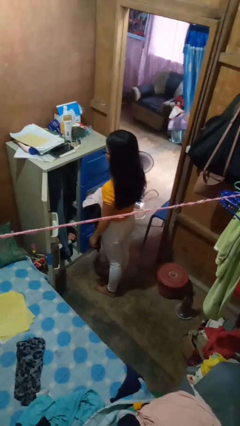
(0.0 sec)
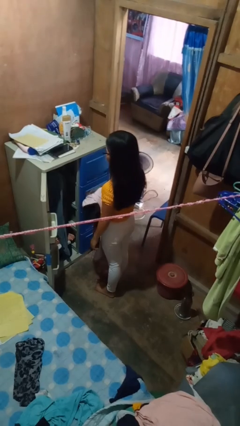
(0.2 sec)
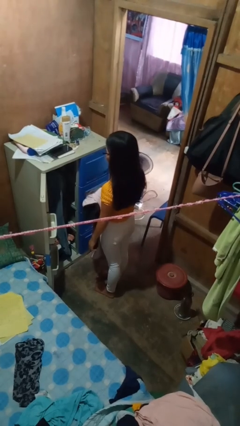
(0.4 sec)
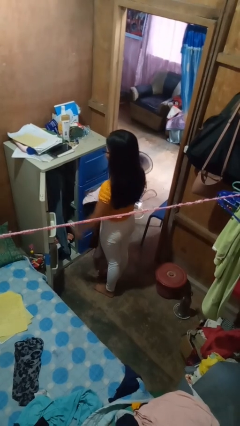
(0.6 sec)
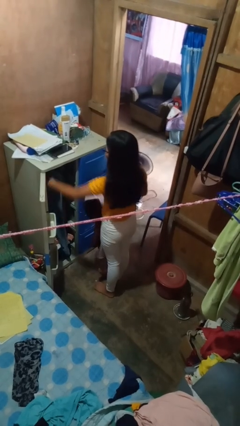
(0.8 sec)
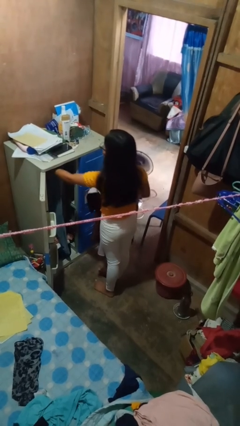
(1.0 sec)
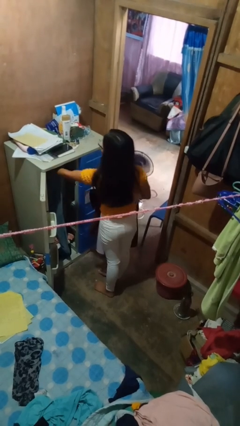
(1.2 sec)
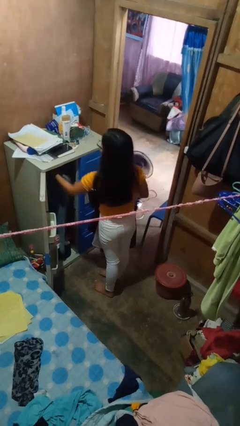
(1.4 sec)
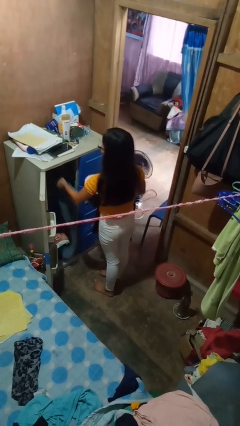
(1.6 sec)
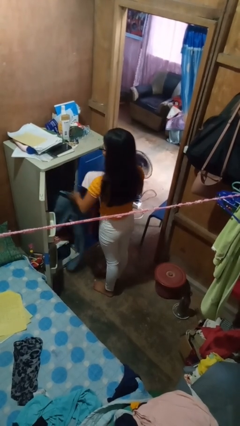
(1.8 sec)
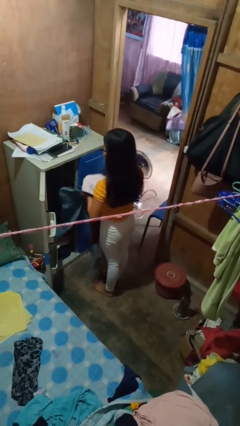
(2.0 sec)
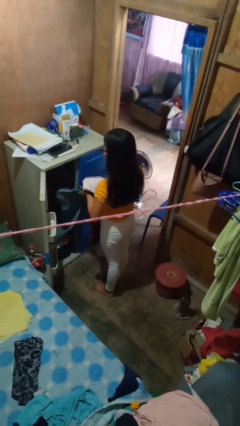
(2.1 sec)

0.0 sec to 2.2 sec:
person takes clothes from closet

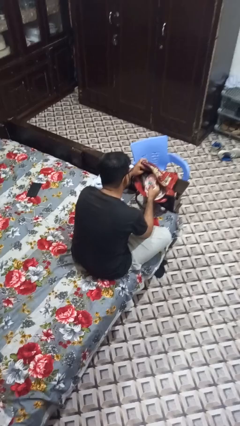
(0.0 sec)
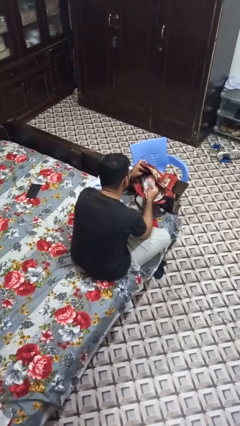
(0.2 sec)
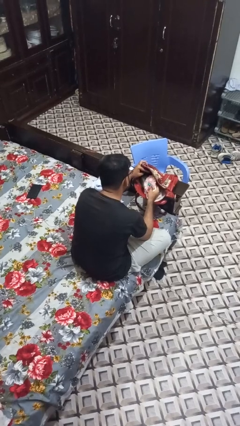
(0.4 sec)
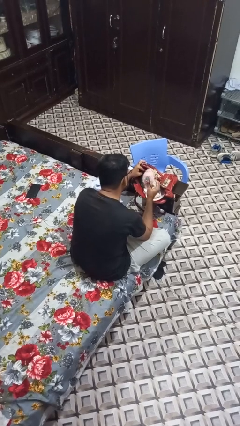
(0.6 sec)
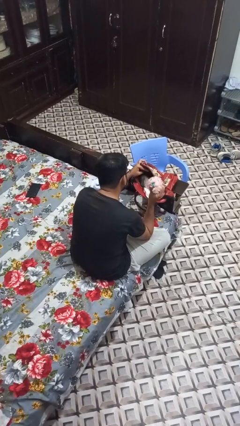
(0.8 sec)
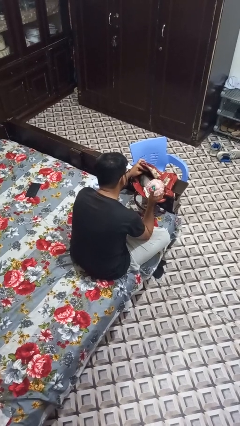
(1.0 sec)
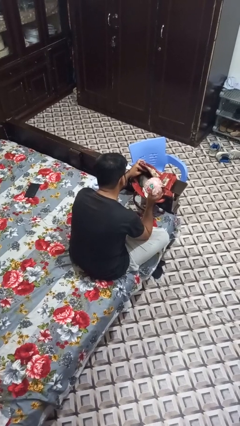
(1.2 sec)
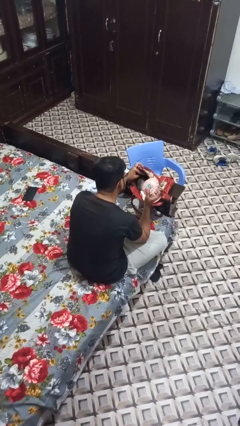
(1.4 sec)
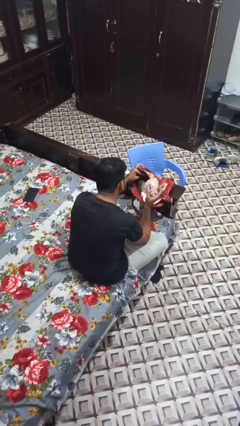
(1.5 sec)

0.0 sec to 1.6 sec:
person takes object from purse

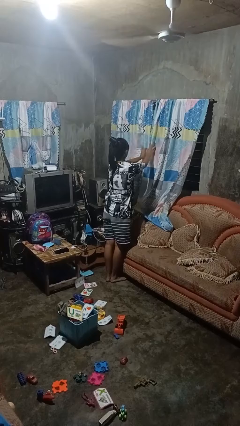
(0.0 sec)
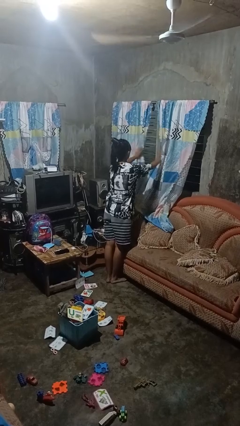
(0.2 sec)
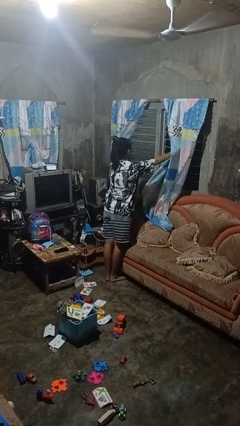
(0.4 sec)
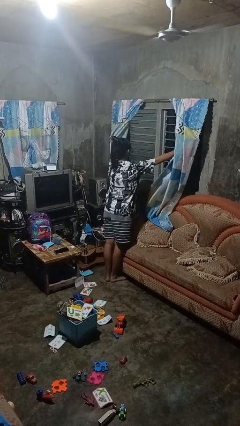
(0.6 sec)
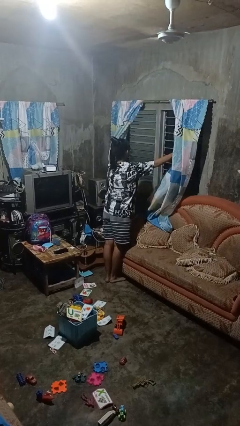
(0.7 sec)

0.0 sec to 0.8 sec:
person opens curtains

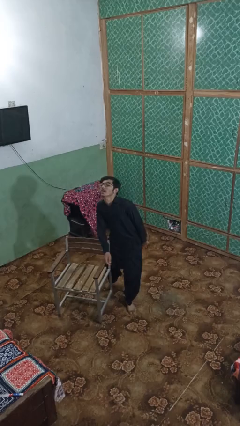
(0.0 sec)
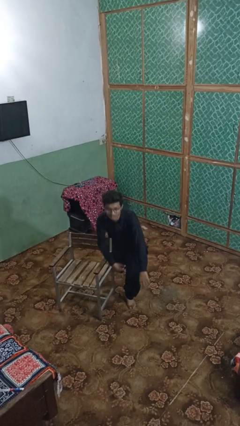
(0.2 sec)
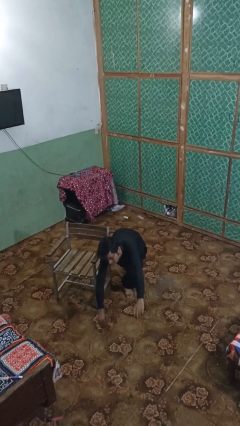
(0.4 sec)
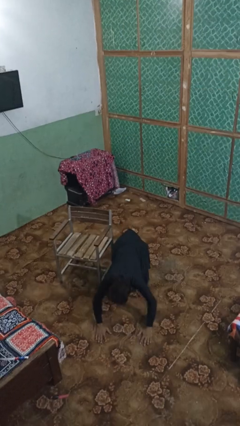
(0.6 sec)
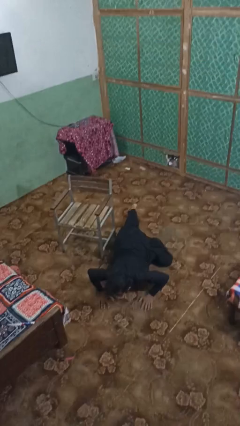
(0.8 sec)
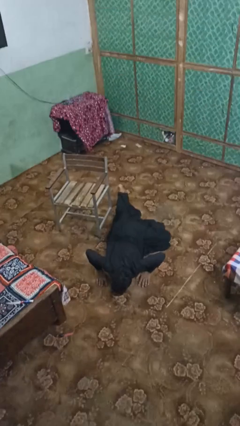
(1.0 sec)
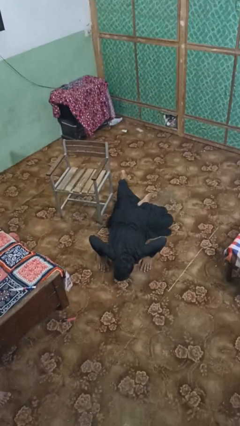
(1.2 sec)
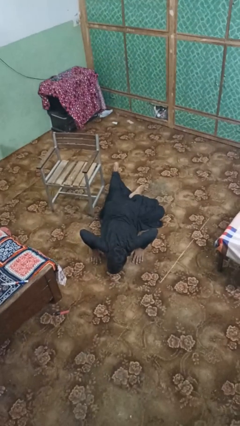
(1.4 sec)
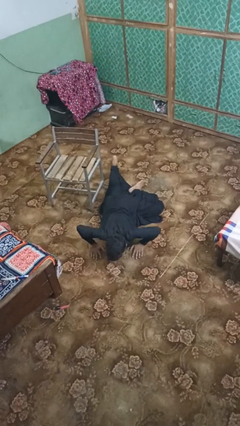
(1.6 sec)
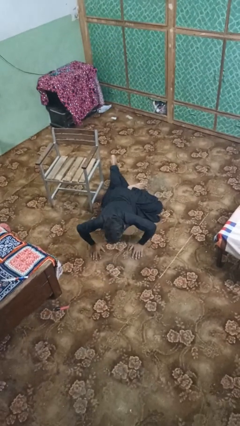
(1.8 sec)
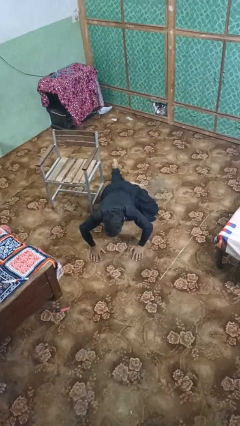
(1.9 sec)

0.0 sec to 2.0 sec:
person lies down on floor

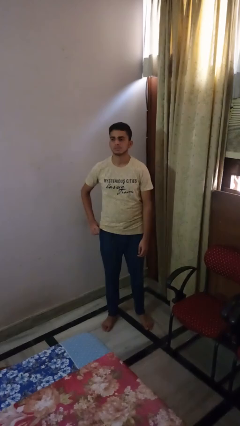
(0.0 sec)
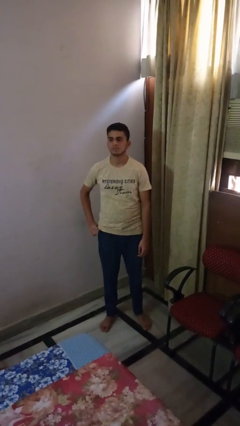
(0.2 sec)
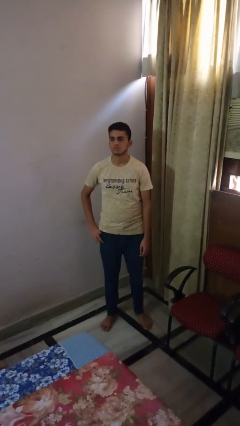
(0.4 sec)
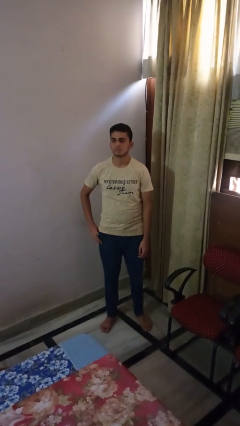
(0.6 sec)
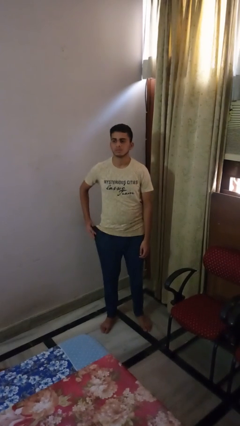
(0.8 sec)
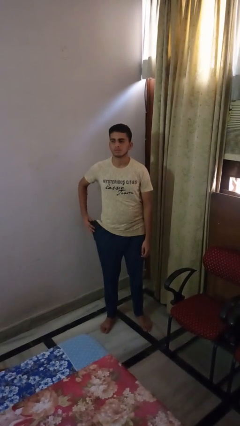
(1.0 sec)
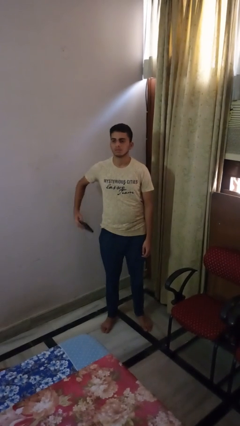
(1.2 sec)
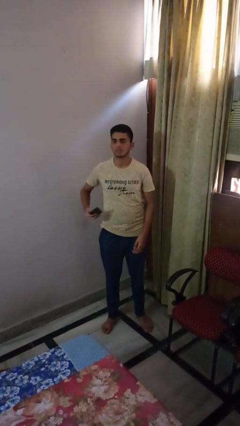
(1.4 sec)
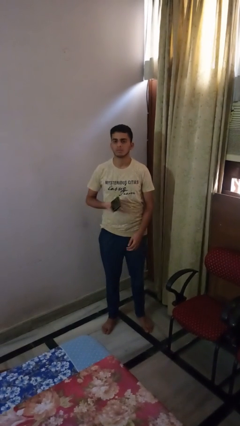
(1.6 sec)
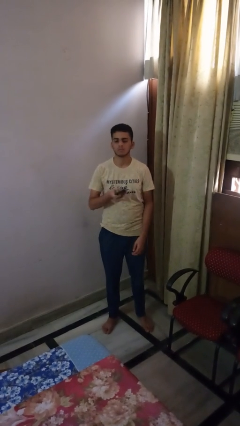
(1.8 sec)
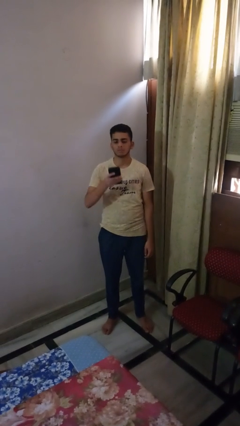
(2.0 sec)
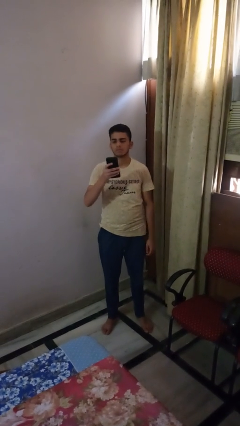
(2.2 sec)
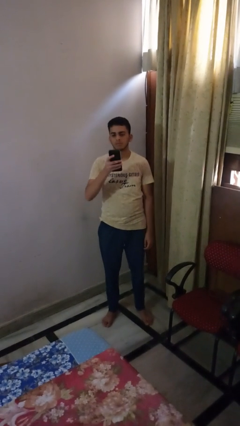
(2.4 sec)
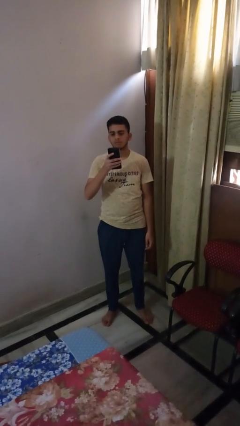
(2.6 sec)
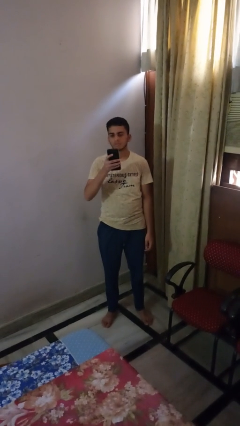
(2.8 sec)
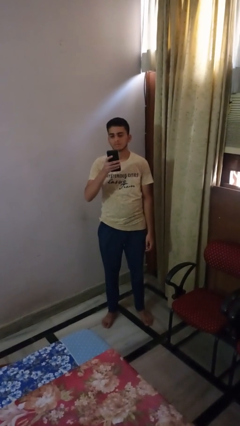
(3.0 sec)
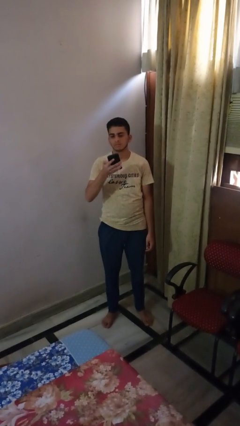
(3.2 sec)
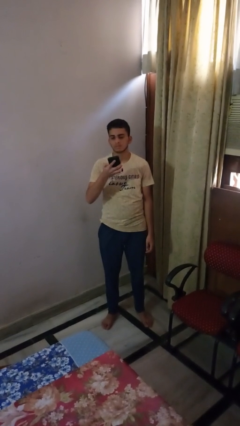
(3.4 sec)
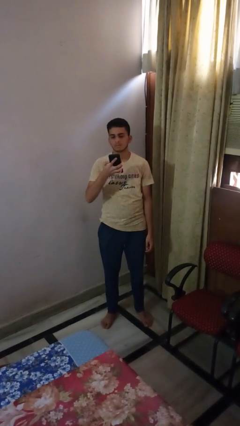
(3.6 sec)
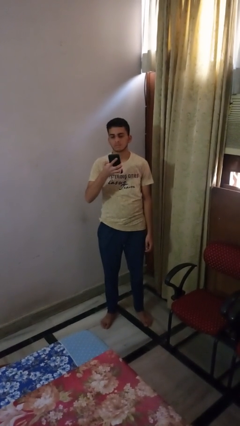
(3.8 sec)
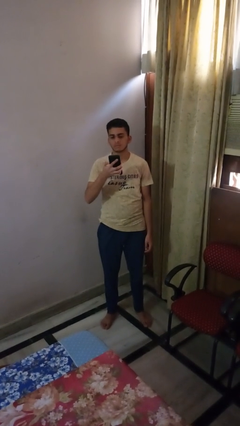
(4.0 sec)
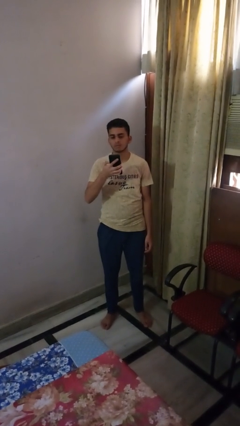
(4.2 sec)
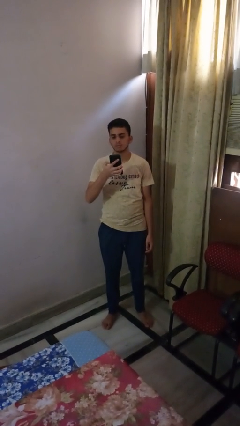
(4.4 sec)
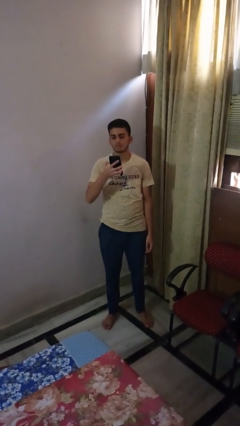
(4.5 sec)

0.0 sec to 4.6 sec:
person takes phone from pocket

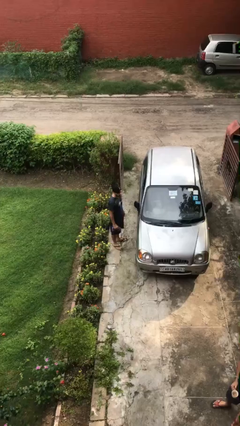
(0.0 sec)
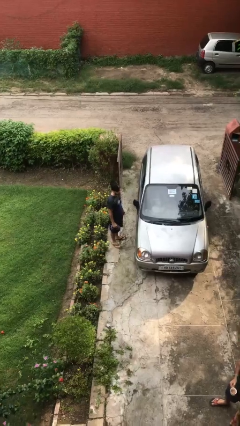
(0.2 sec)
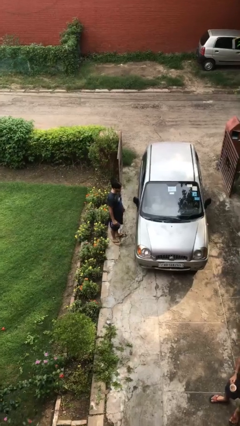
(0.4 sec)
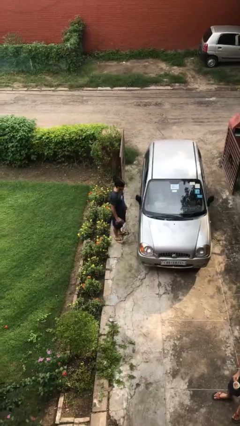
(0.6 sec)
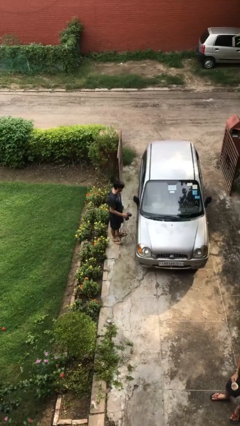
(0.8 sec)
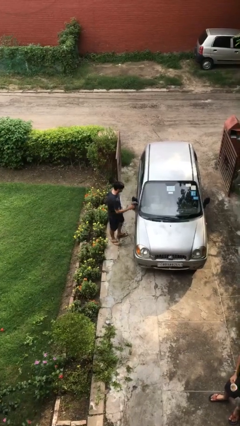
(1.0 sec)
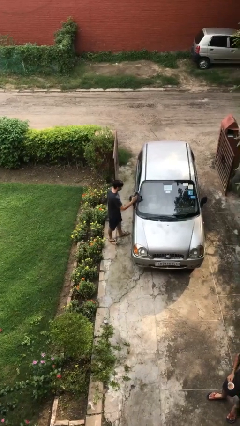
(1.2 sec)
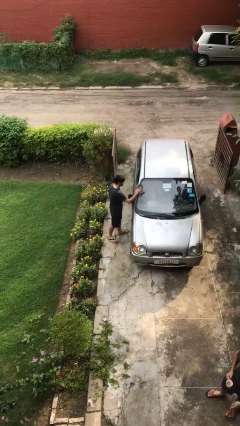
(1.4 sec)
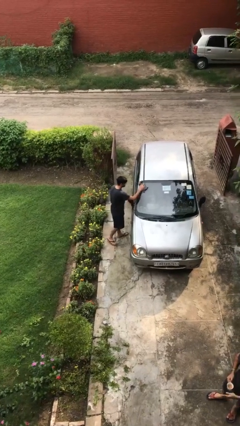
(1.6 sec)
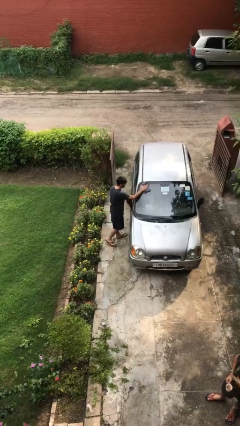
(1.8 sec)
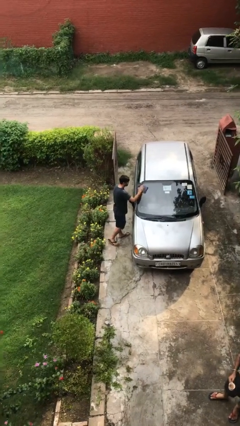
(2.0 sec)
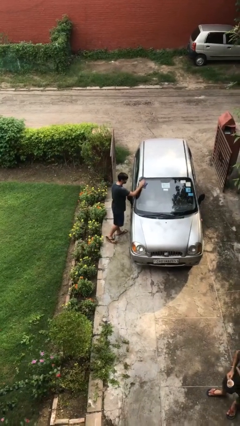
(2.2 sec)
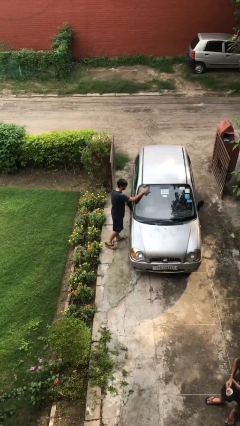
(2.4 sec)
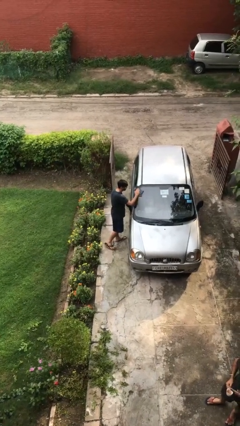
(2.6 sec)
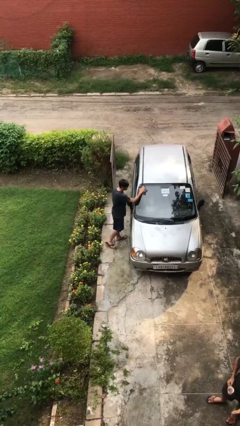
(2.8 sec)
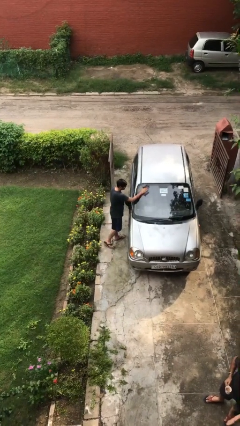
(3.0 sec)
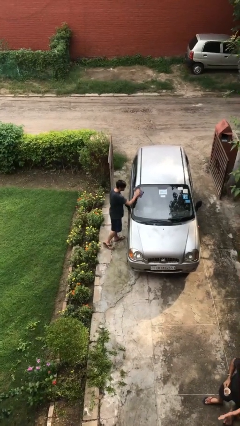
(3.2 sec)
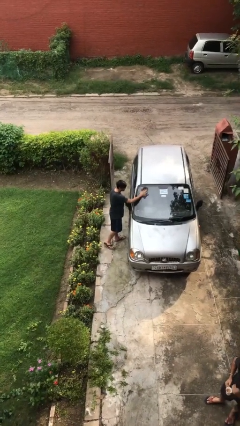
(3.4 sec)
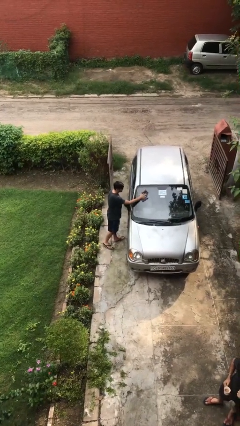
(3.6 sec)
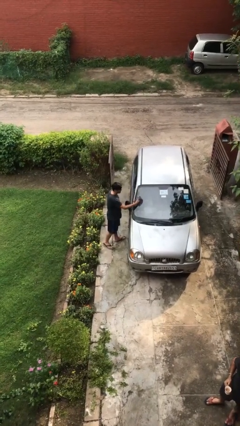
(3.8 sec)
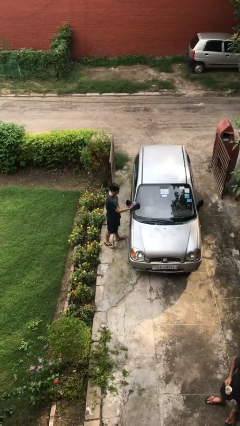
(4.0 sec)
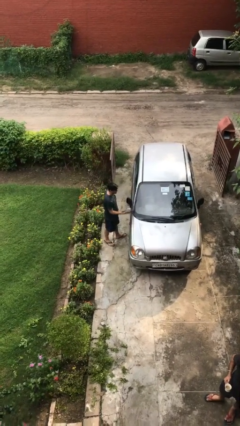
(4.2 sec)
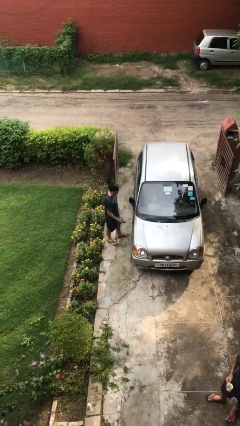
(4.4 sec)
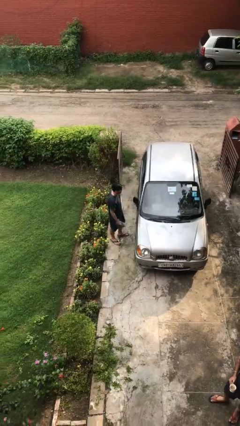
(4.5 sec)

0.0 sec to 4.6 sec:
person polishes car with rag

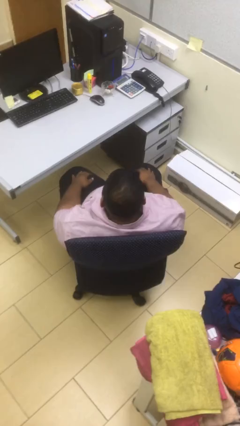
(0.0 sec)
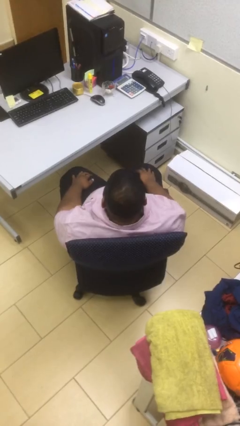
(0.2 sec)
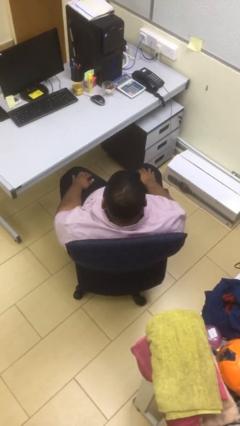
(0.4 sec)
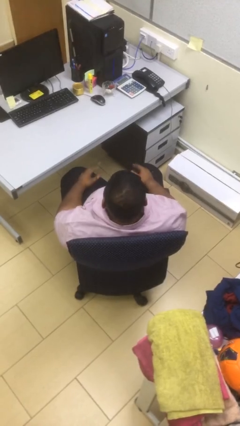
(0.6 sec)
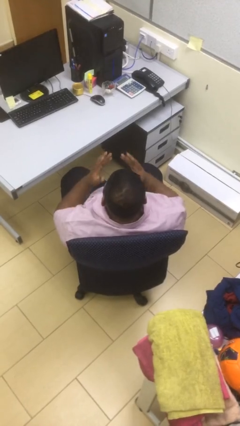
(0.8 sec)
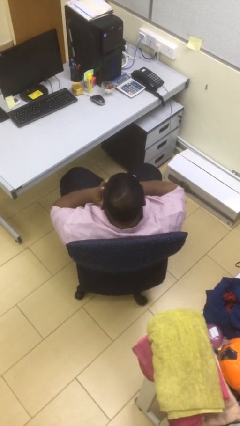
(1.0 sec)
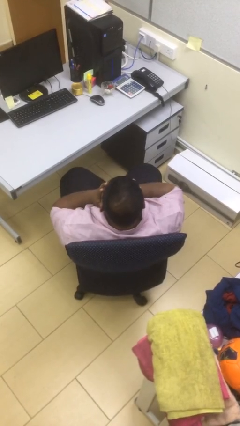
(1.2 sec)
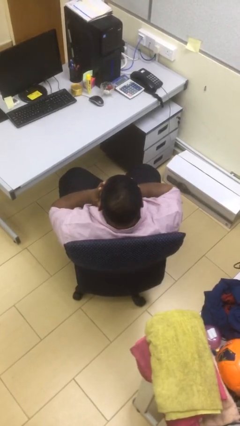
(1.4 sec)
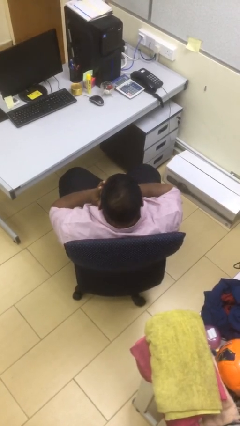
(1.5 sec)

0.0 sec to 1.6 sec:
person covers face with hands
